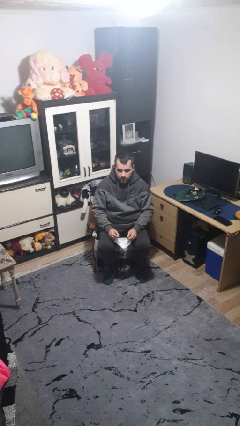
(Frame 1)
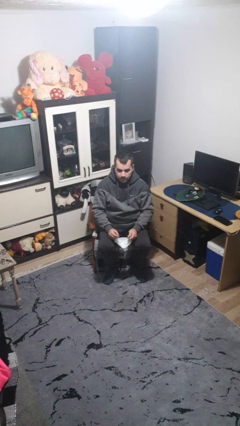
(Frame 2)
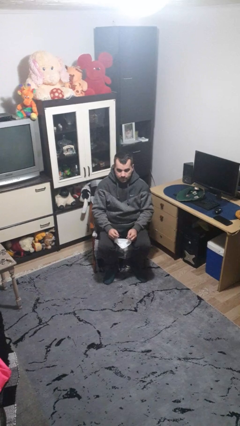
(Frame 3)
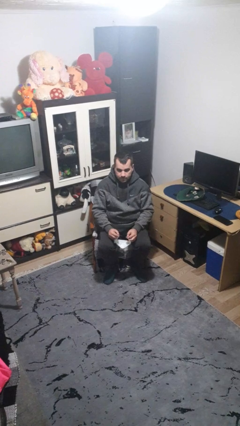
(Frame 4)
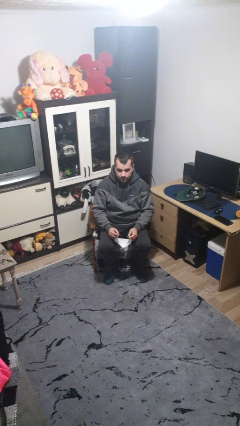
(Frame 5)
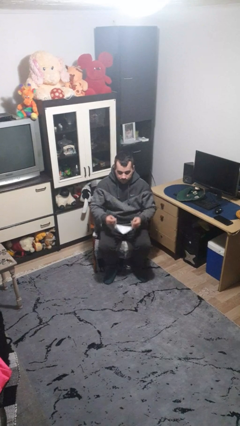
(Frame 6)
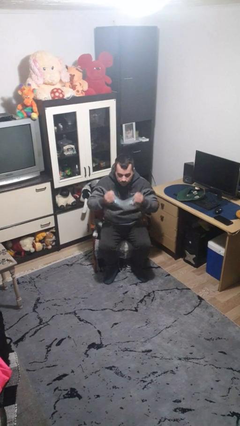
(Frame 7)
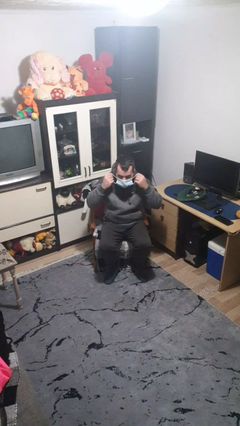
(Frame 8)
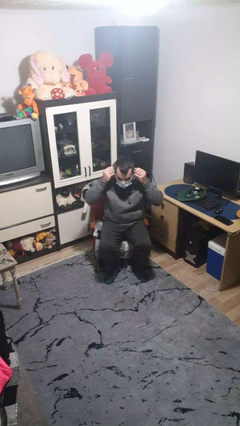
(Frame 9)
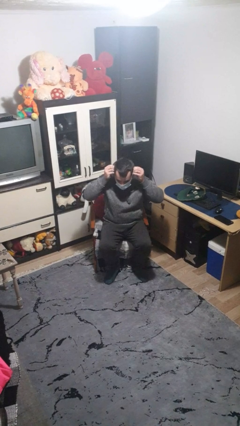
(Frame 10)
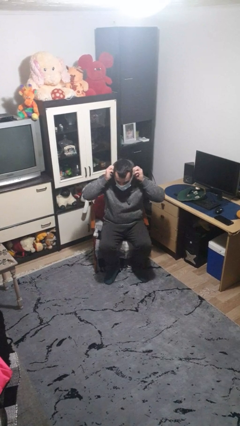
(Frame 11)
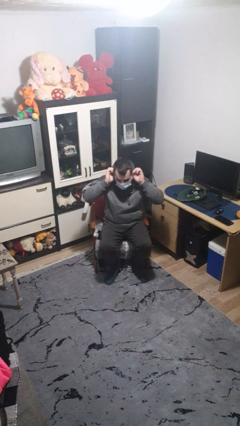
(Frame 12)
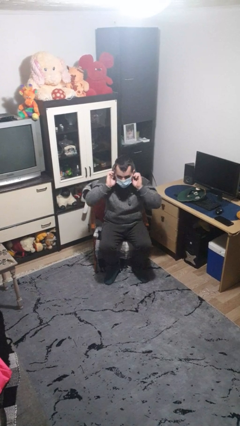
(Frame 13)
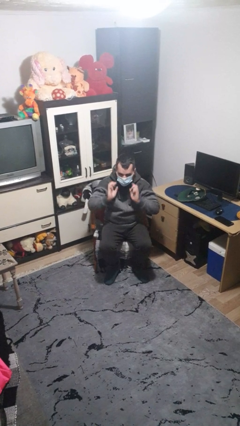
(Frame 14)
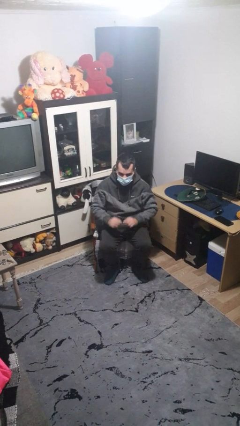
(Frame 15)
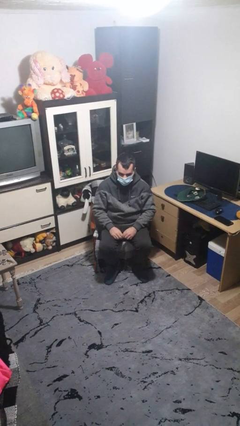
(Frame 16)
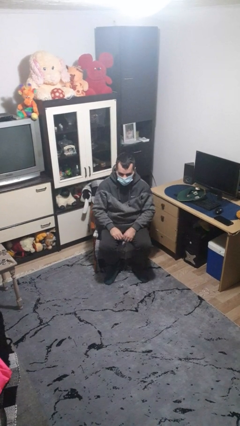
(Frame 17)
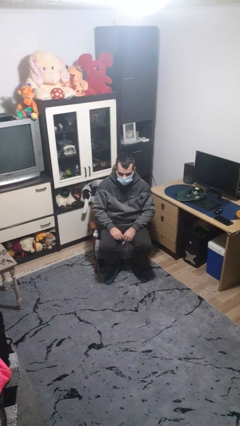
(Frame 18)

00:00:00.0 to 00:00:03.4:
person puts on facemask

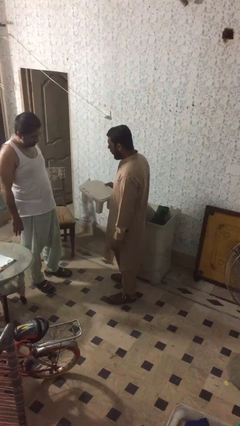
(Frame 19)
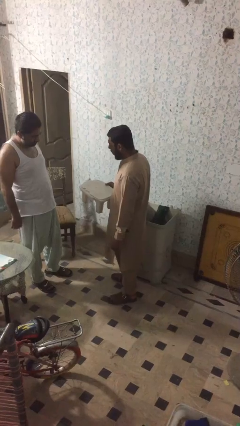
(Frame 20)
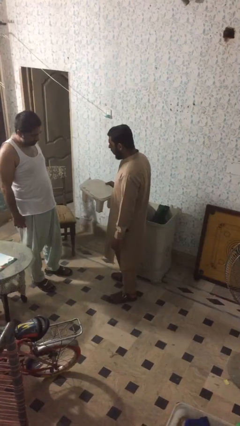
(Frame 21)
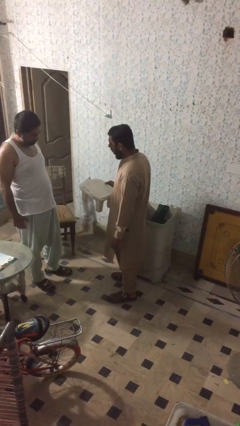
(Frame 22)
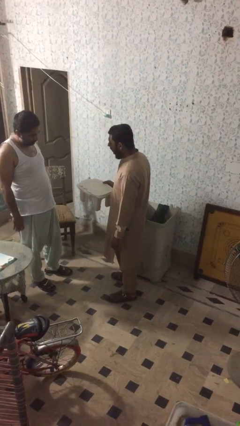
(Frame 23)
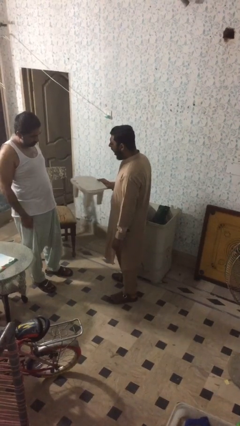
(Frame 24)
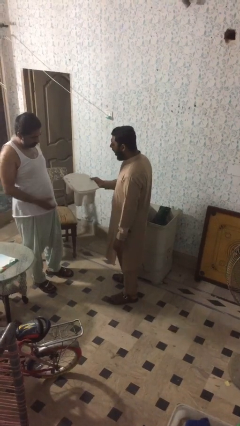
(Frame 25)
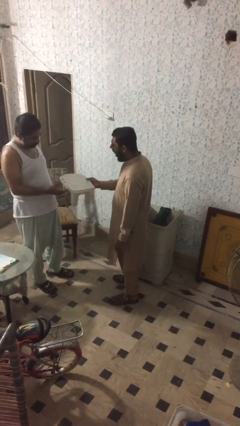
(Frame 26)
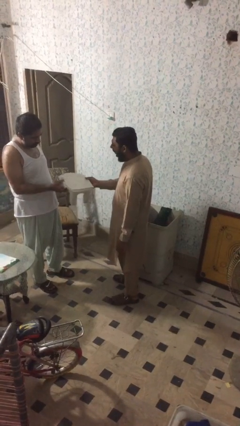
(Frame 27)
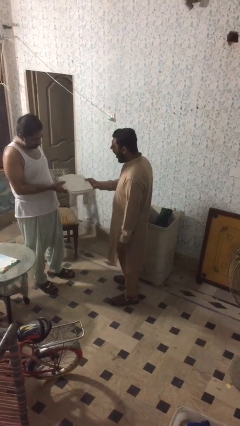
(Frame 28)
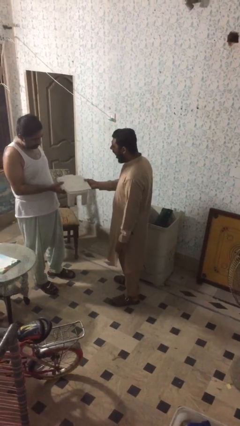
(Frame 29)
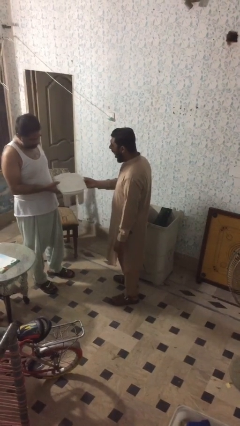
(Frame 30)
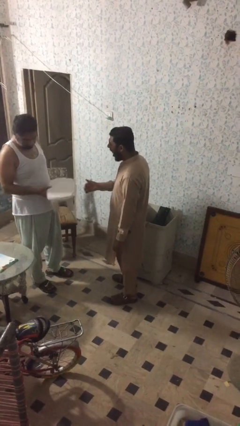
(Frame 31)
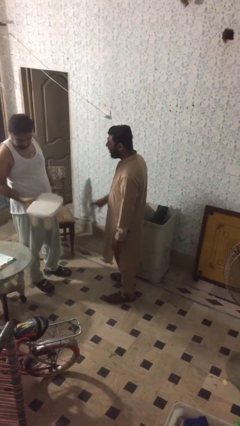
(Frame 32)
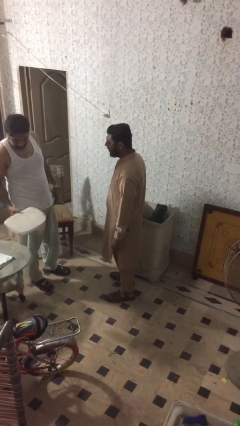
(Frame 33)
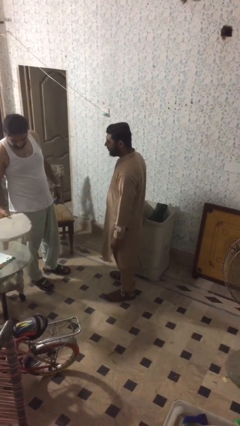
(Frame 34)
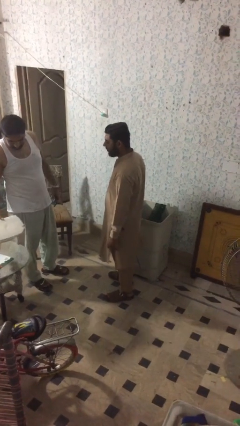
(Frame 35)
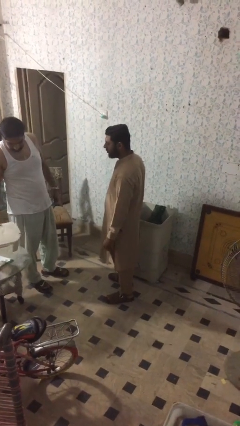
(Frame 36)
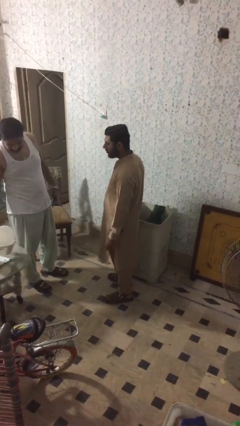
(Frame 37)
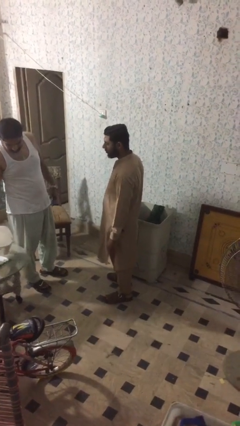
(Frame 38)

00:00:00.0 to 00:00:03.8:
person transfers object to person

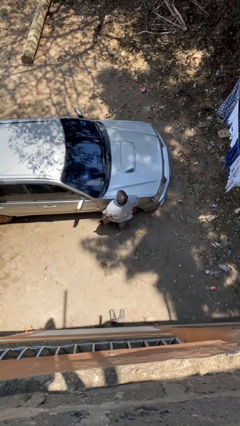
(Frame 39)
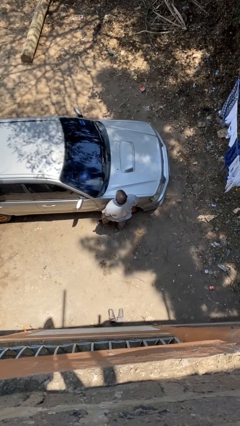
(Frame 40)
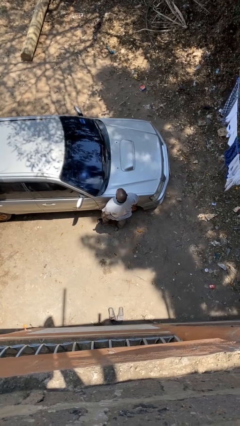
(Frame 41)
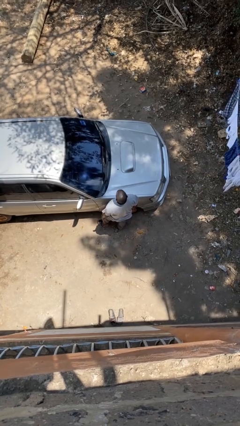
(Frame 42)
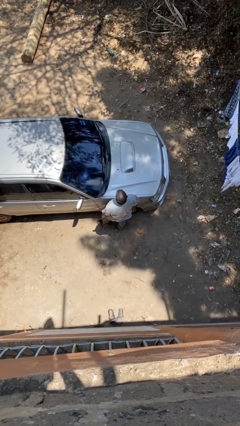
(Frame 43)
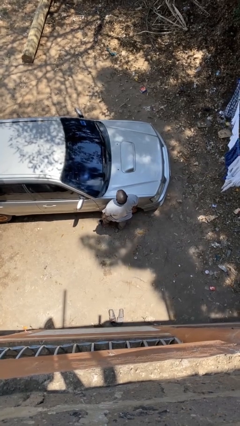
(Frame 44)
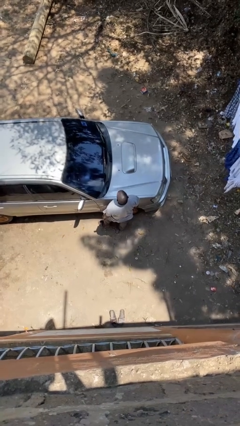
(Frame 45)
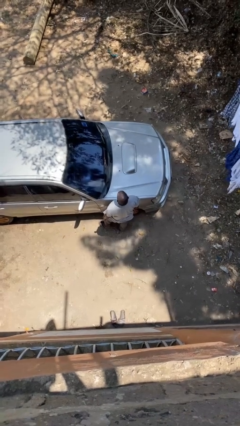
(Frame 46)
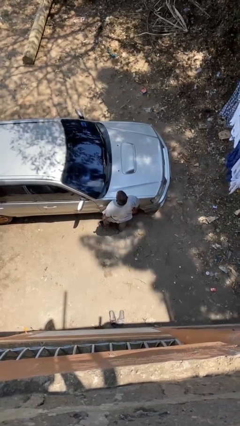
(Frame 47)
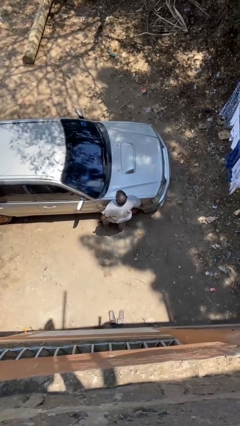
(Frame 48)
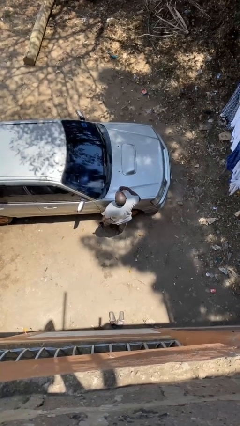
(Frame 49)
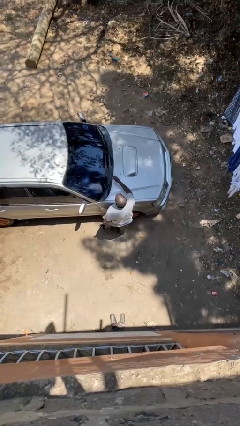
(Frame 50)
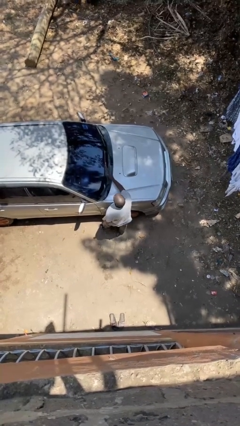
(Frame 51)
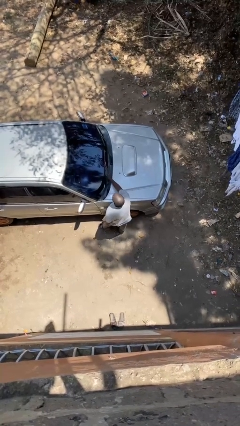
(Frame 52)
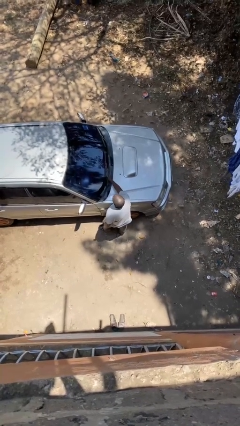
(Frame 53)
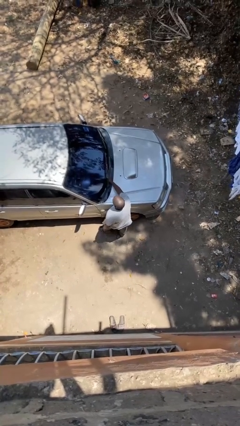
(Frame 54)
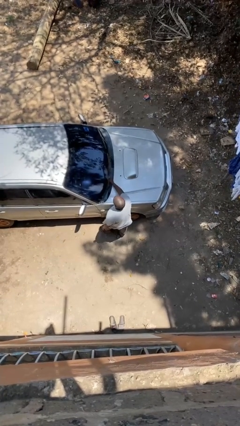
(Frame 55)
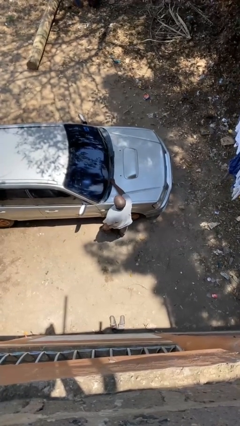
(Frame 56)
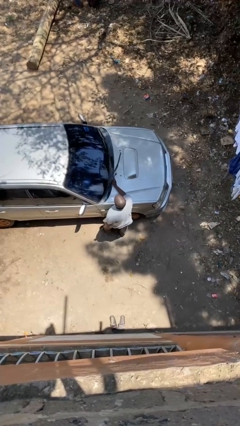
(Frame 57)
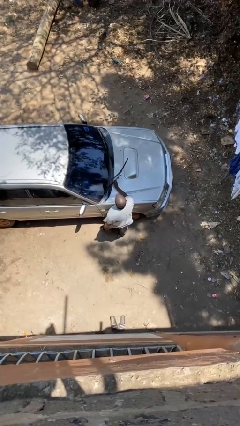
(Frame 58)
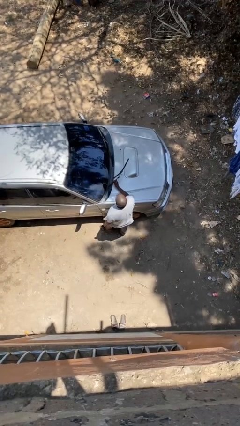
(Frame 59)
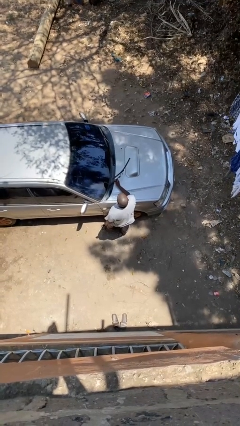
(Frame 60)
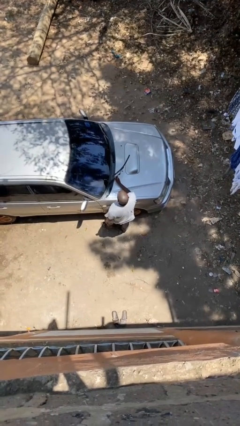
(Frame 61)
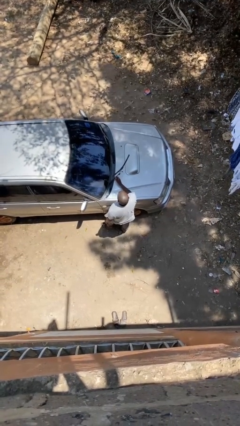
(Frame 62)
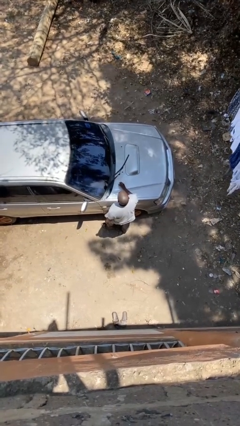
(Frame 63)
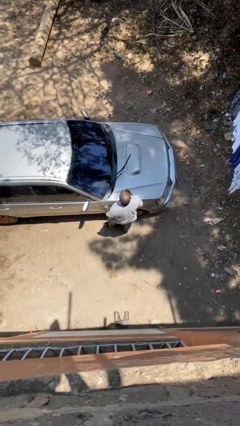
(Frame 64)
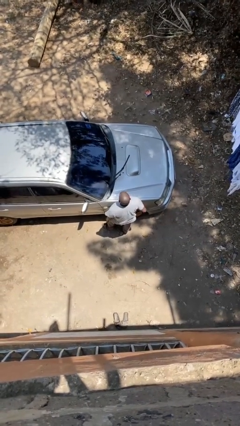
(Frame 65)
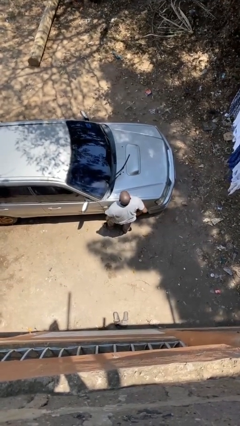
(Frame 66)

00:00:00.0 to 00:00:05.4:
person flips up car wipers

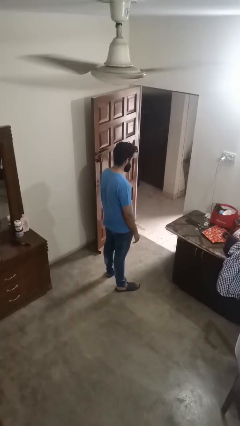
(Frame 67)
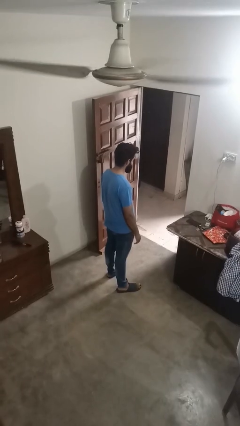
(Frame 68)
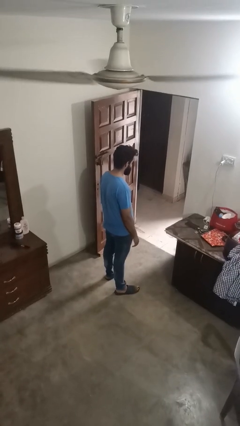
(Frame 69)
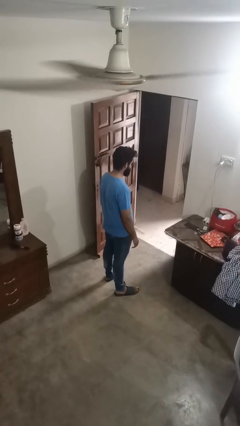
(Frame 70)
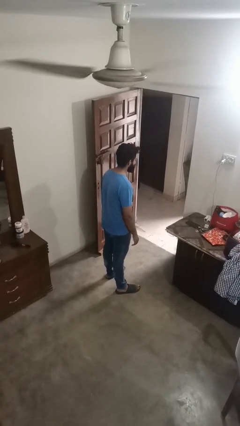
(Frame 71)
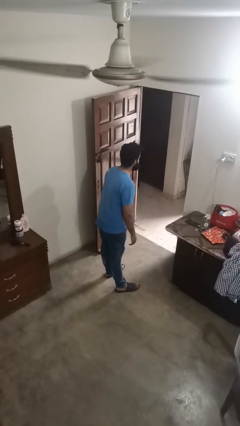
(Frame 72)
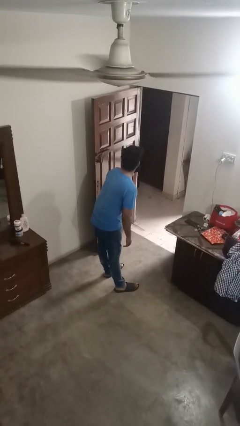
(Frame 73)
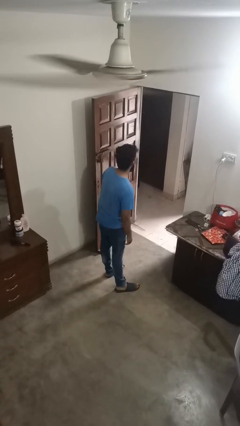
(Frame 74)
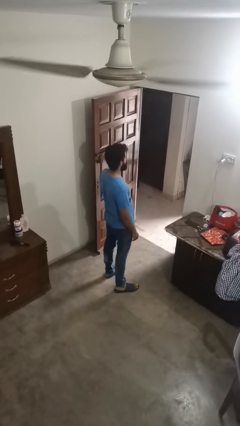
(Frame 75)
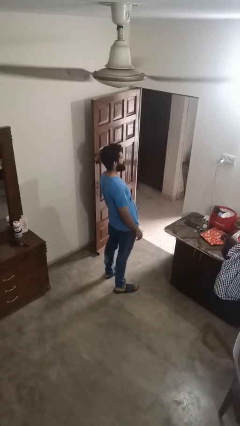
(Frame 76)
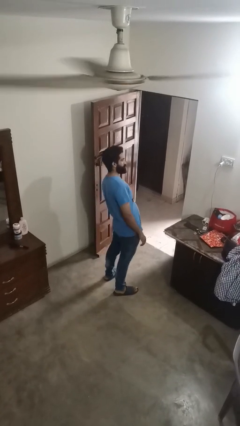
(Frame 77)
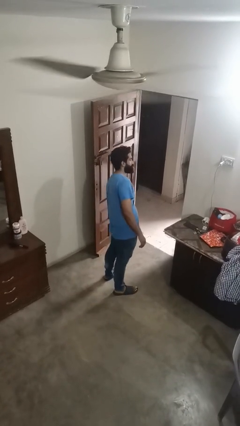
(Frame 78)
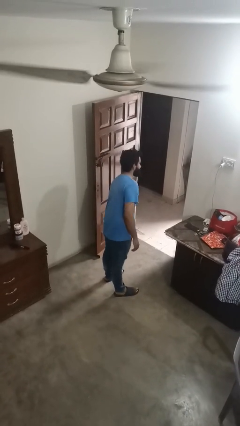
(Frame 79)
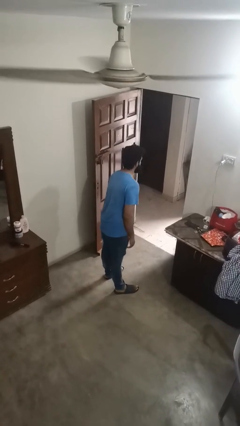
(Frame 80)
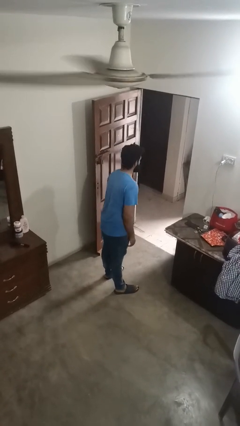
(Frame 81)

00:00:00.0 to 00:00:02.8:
person wiggles hips

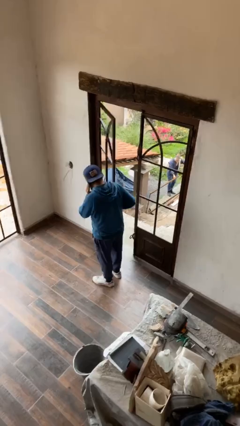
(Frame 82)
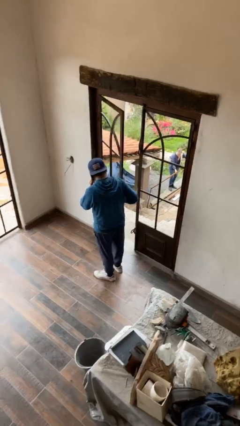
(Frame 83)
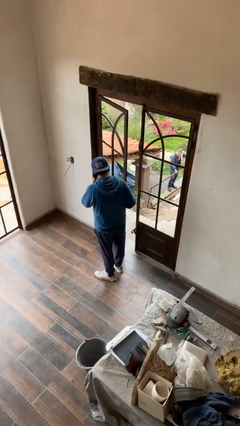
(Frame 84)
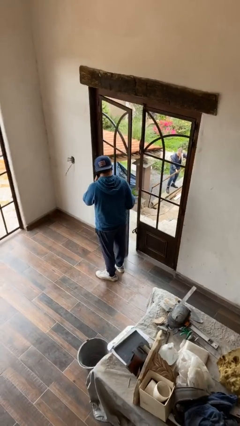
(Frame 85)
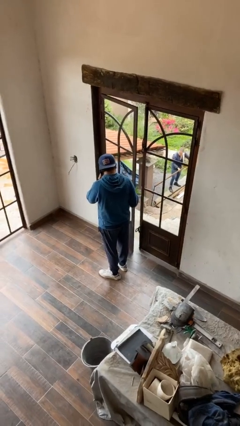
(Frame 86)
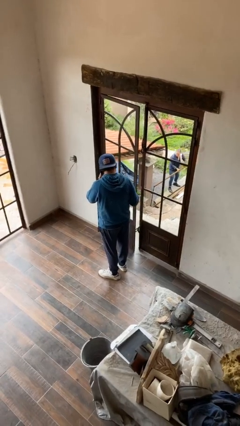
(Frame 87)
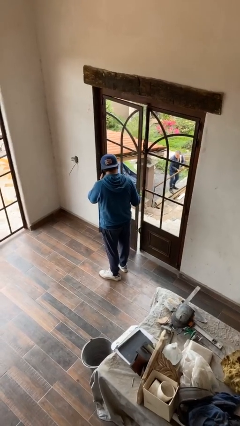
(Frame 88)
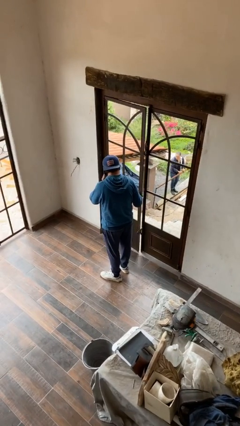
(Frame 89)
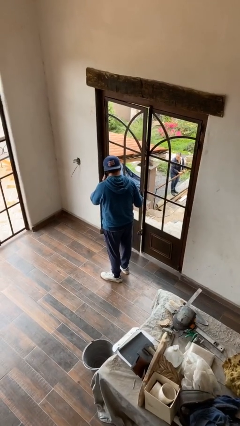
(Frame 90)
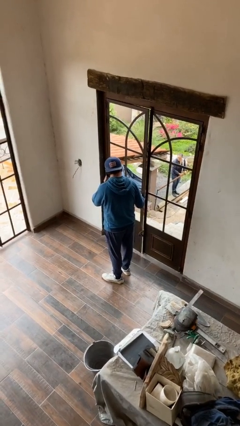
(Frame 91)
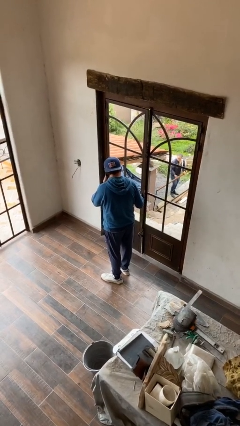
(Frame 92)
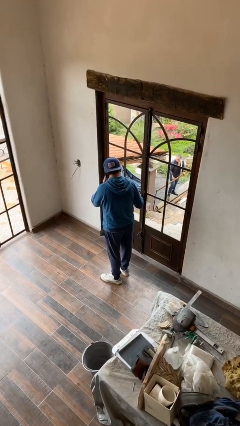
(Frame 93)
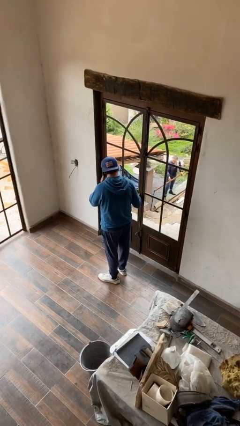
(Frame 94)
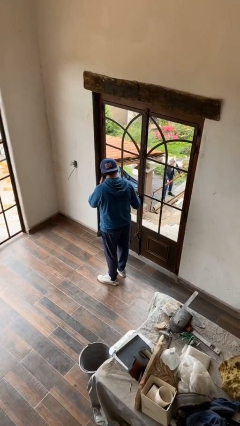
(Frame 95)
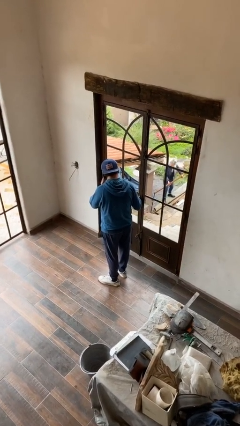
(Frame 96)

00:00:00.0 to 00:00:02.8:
person closes facility door
